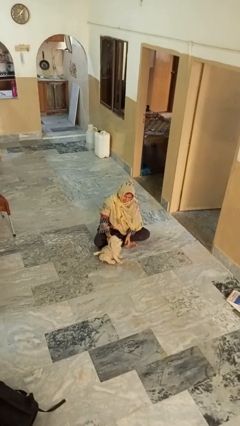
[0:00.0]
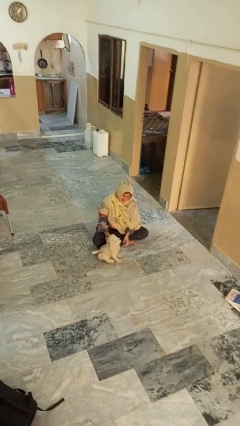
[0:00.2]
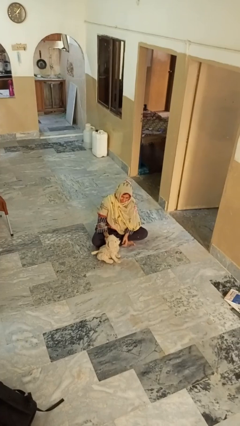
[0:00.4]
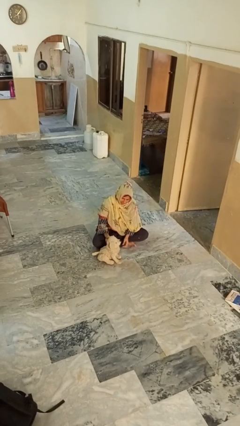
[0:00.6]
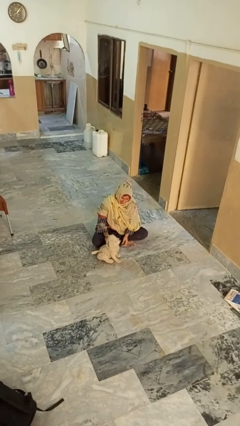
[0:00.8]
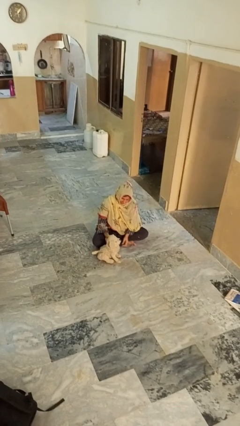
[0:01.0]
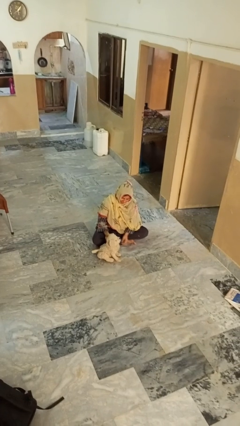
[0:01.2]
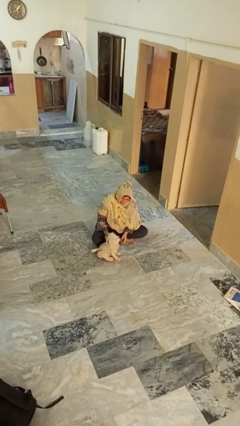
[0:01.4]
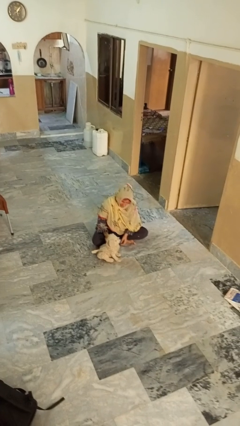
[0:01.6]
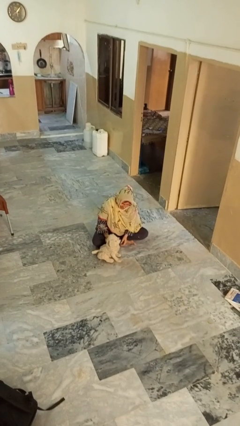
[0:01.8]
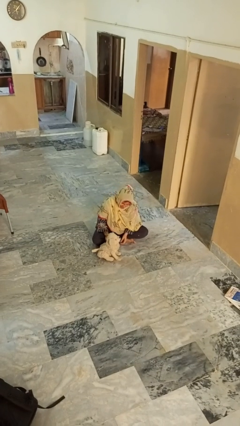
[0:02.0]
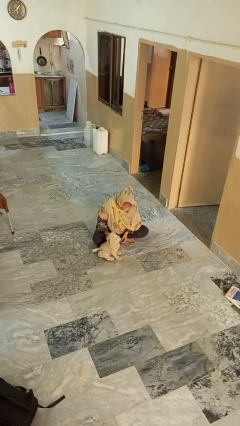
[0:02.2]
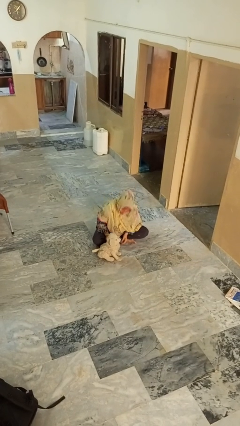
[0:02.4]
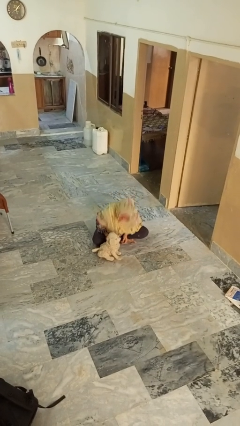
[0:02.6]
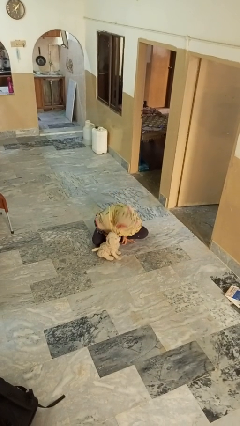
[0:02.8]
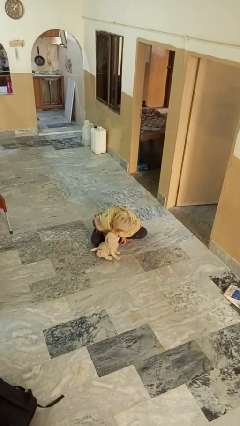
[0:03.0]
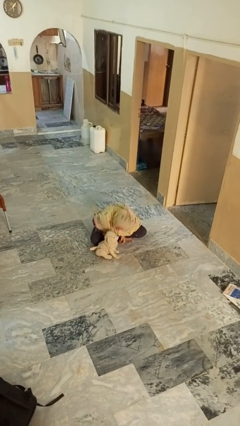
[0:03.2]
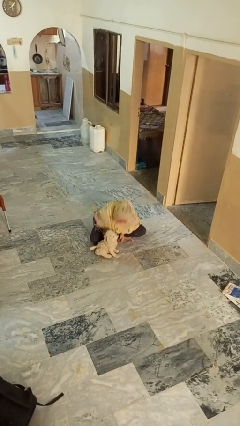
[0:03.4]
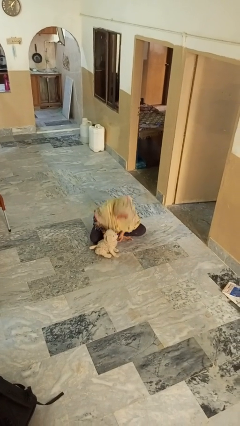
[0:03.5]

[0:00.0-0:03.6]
person pets dog

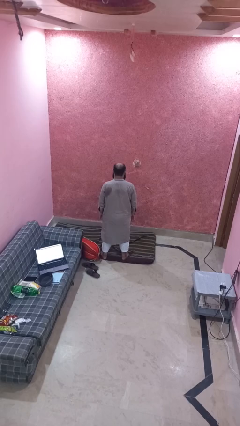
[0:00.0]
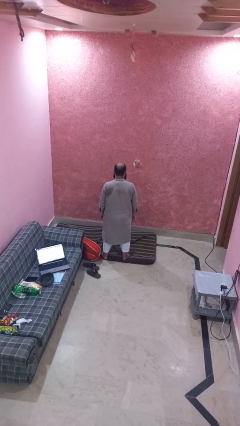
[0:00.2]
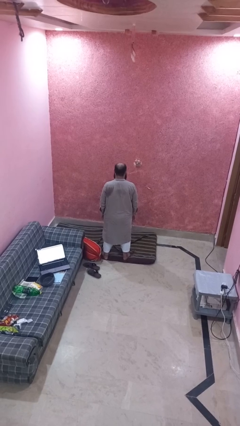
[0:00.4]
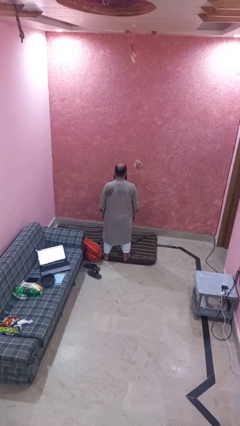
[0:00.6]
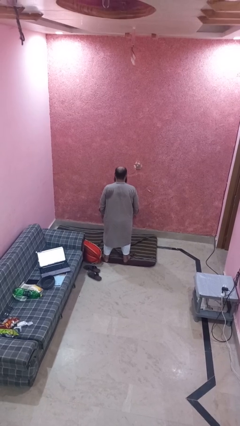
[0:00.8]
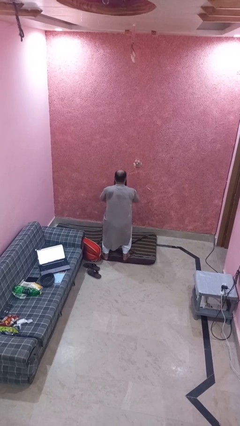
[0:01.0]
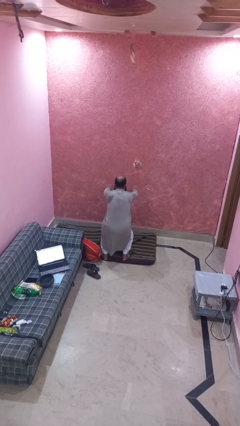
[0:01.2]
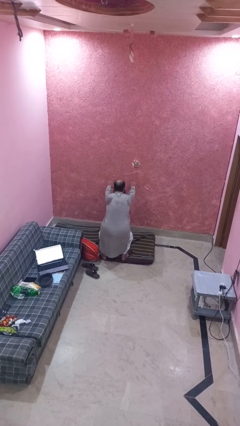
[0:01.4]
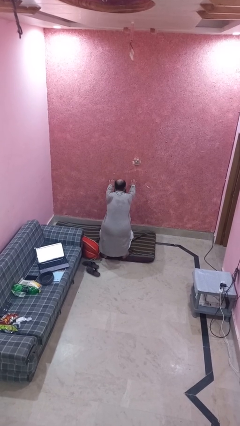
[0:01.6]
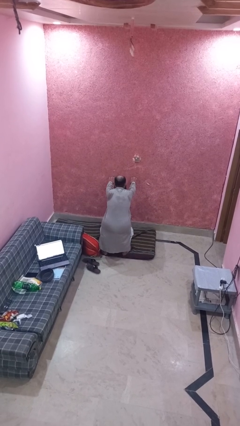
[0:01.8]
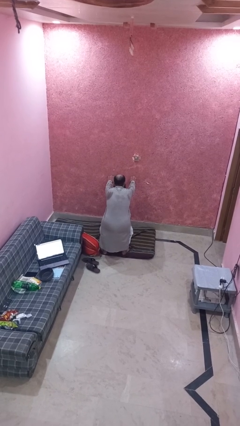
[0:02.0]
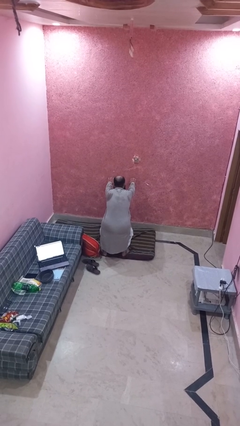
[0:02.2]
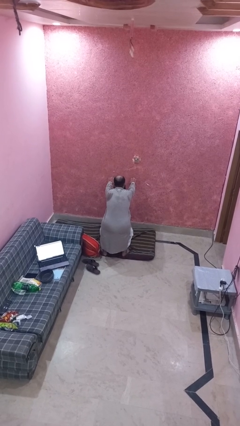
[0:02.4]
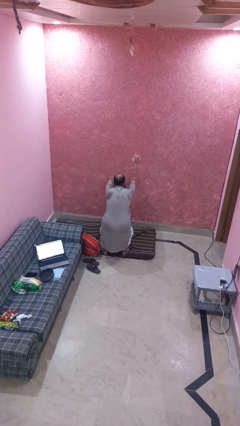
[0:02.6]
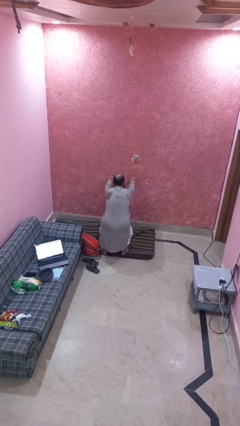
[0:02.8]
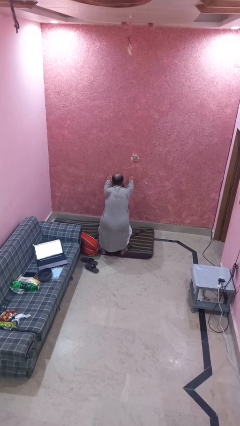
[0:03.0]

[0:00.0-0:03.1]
person squats

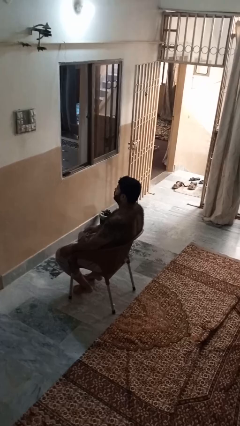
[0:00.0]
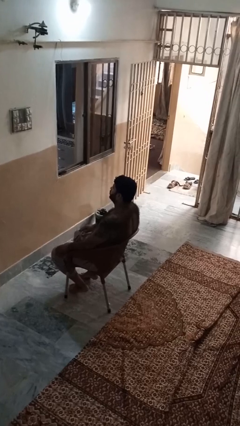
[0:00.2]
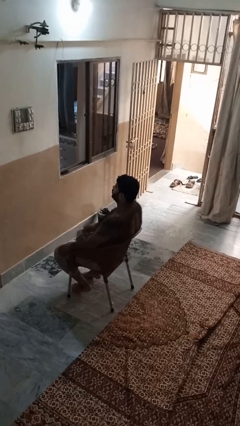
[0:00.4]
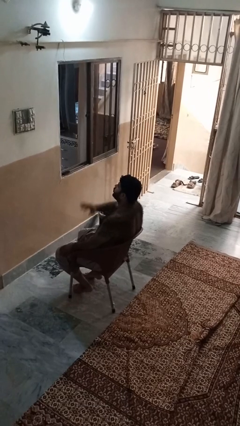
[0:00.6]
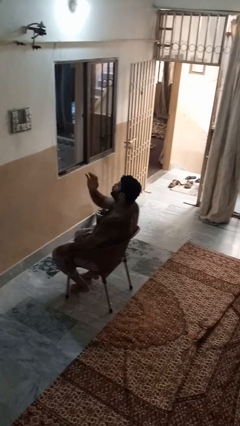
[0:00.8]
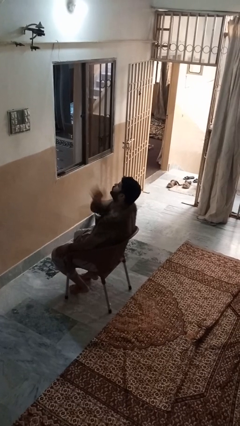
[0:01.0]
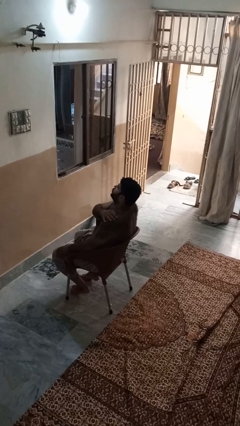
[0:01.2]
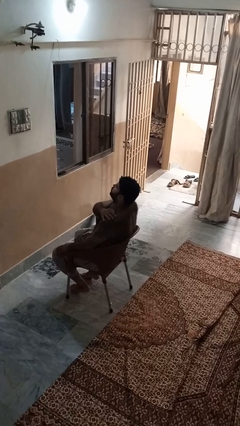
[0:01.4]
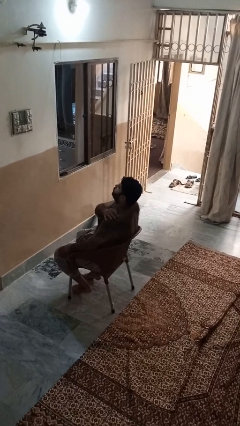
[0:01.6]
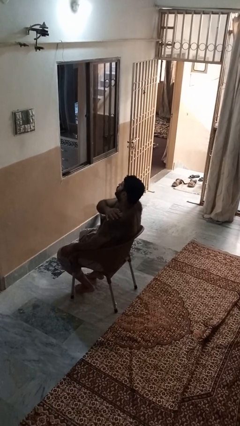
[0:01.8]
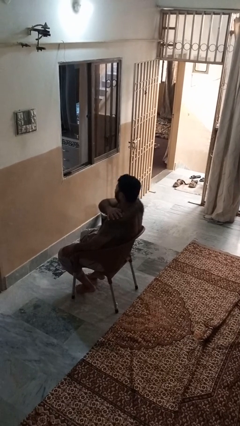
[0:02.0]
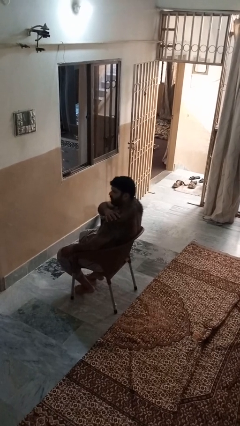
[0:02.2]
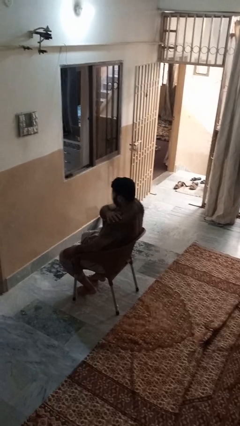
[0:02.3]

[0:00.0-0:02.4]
person shrugs

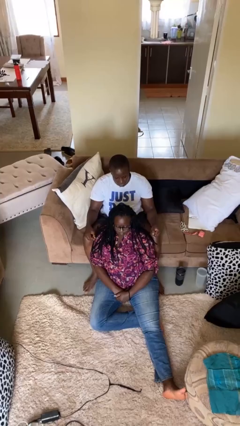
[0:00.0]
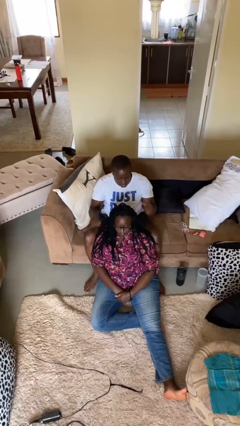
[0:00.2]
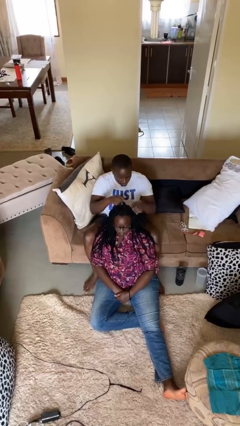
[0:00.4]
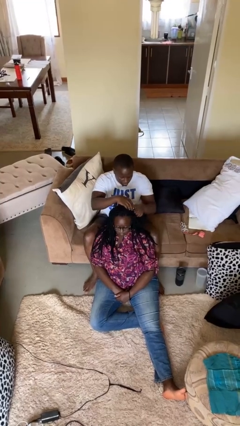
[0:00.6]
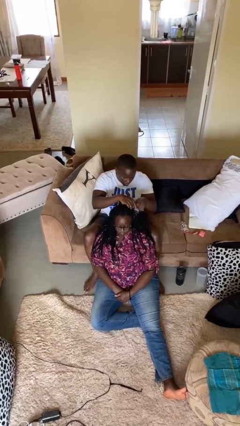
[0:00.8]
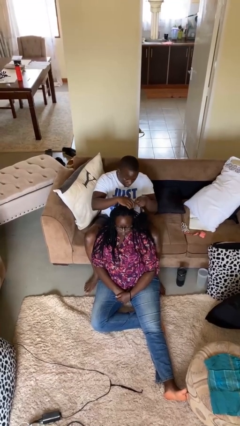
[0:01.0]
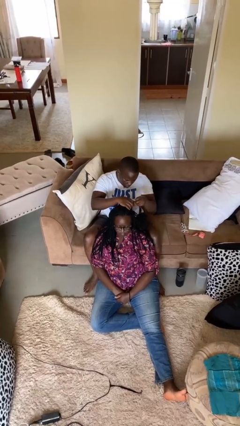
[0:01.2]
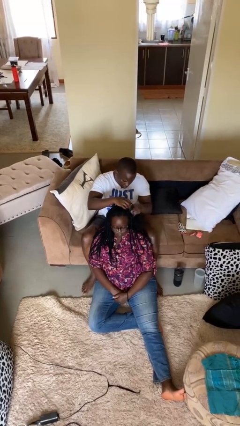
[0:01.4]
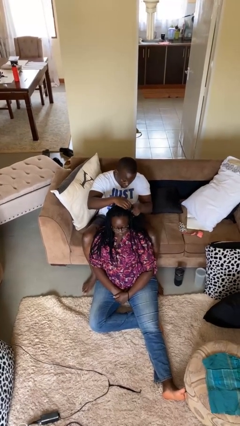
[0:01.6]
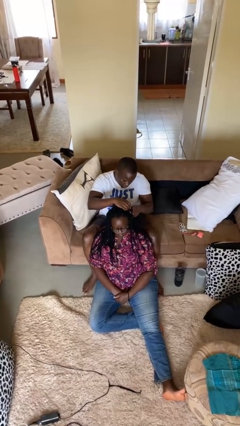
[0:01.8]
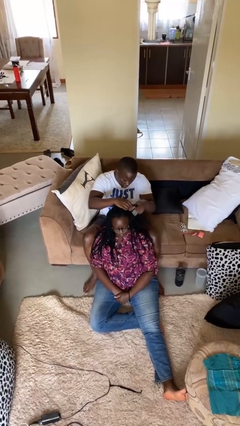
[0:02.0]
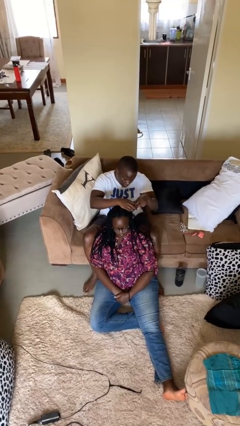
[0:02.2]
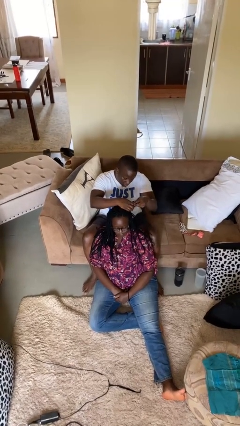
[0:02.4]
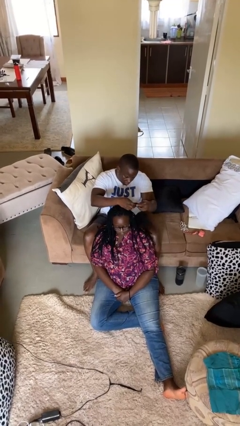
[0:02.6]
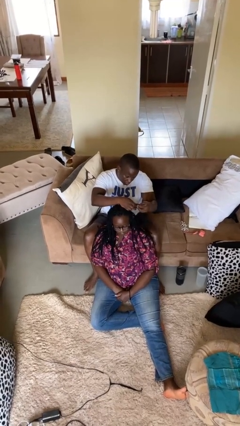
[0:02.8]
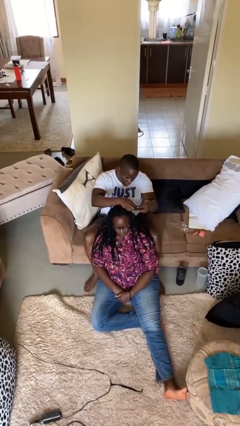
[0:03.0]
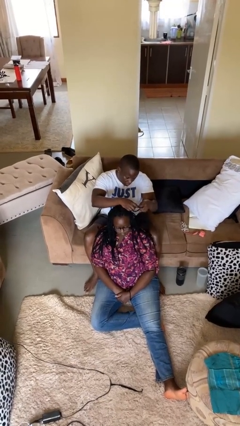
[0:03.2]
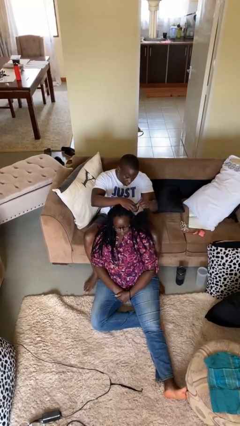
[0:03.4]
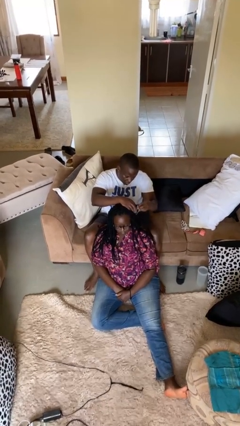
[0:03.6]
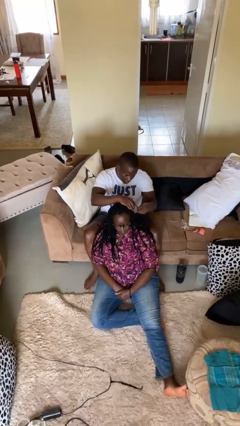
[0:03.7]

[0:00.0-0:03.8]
person braids hair of person

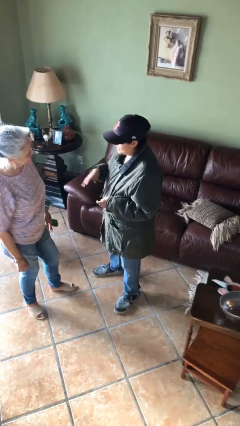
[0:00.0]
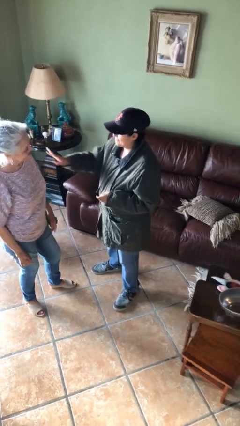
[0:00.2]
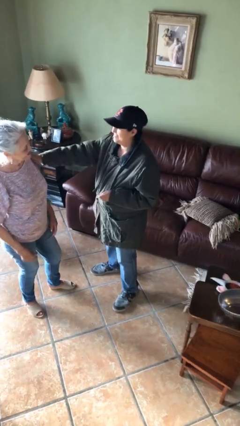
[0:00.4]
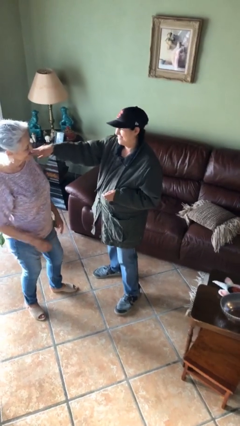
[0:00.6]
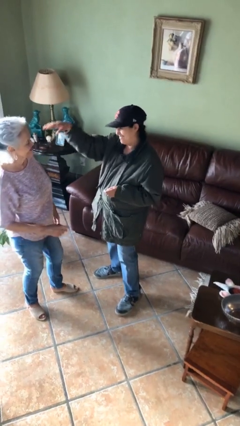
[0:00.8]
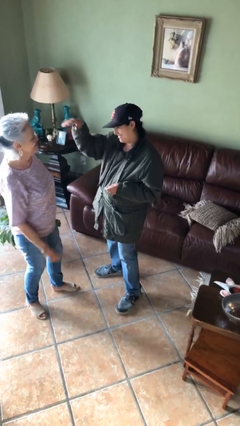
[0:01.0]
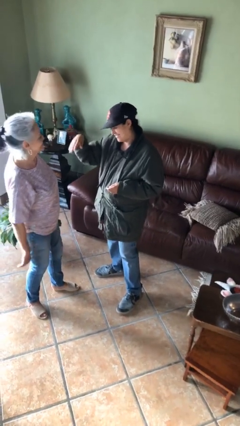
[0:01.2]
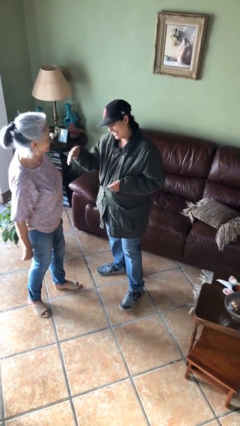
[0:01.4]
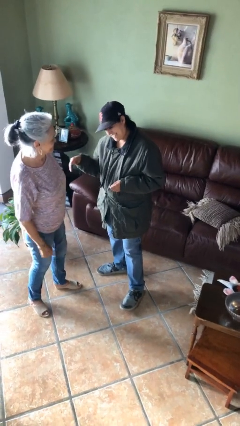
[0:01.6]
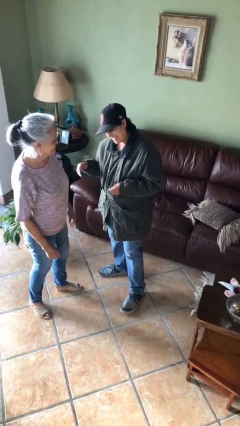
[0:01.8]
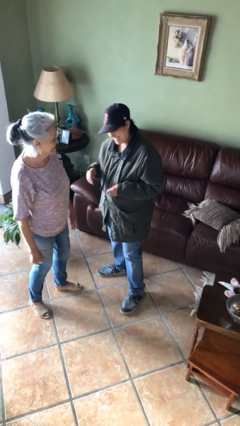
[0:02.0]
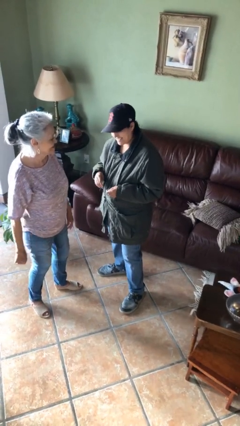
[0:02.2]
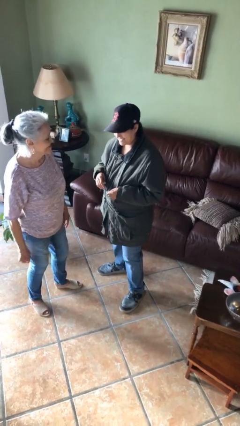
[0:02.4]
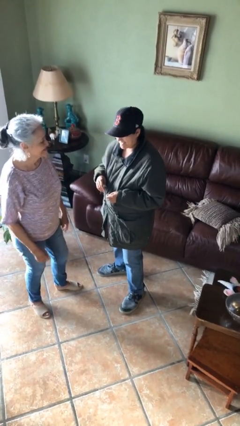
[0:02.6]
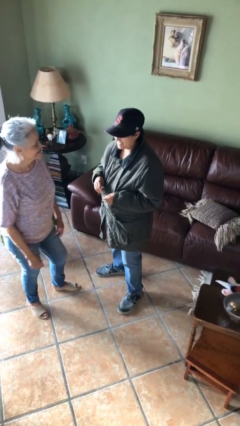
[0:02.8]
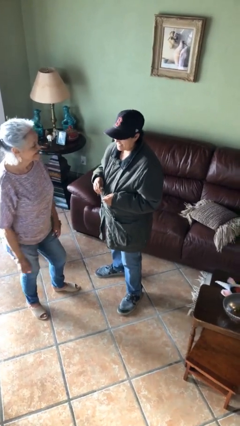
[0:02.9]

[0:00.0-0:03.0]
person shoves person

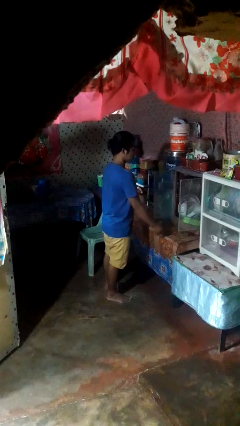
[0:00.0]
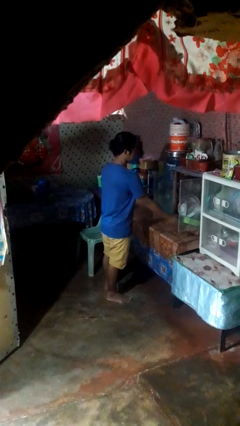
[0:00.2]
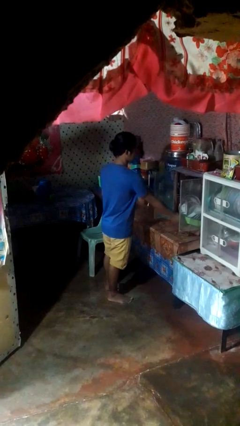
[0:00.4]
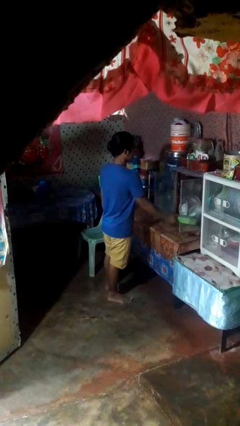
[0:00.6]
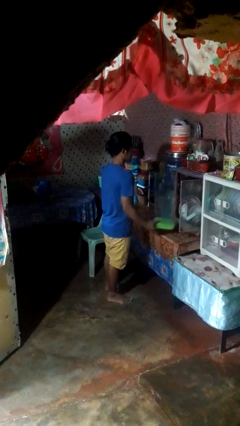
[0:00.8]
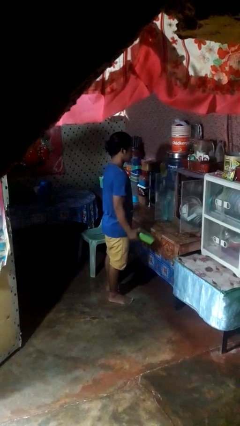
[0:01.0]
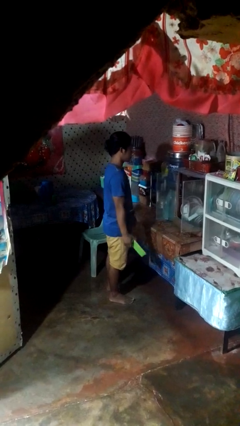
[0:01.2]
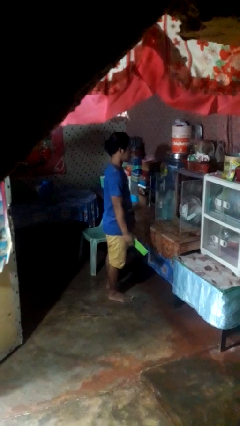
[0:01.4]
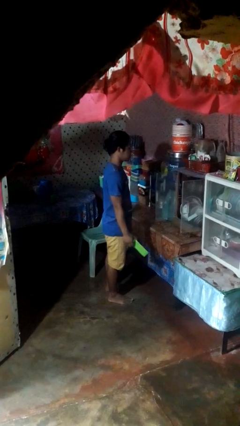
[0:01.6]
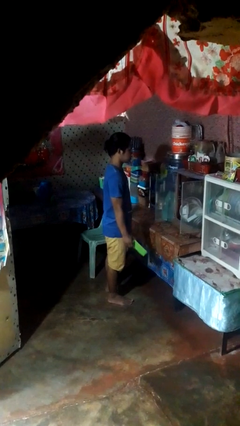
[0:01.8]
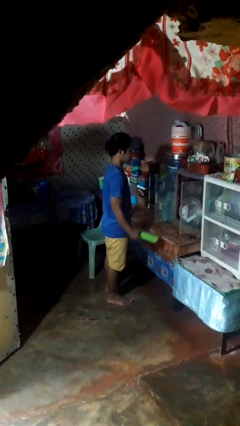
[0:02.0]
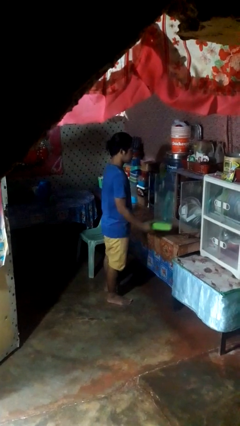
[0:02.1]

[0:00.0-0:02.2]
person picks up object from cabinet
